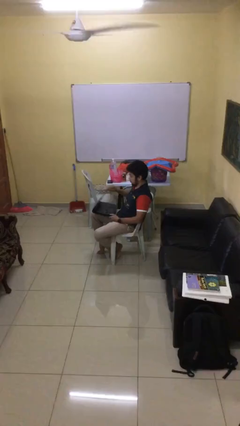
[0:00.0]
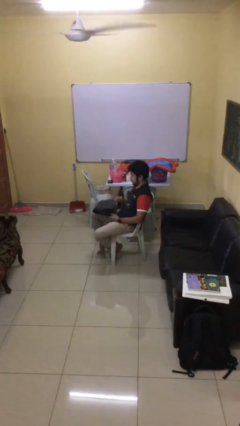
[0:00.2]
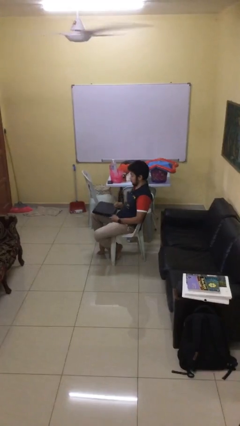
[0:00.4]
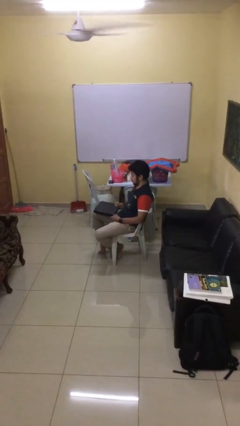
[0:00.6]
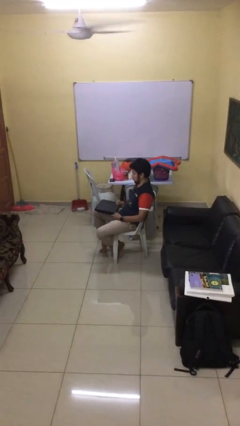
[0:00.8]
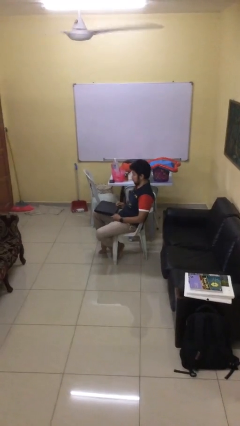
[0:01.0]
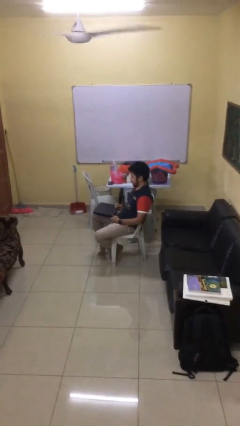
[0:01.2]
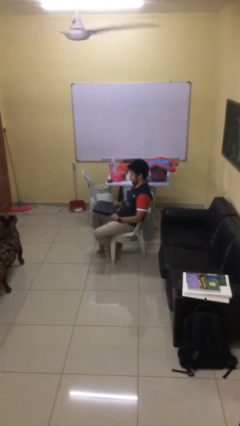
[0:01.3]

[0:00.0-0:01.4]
person closes laptop

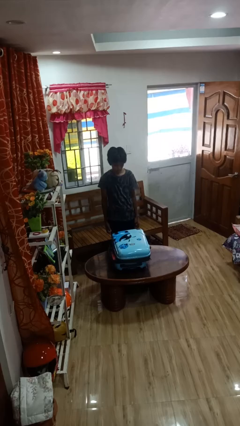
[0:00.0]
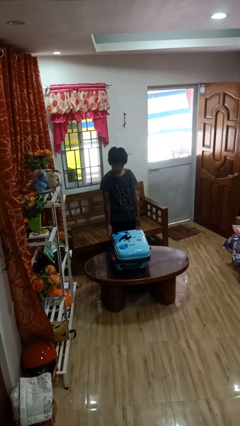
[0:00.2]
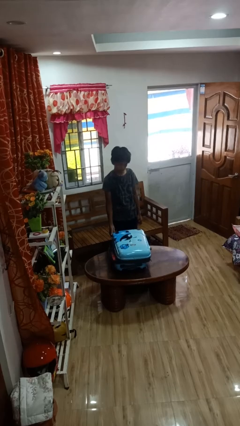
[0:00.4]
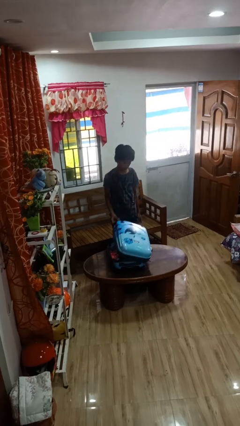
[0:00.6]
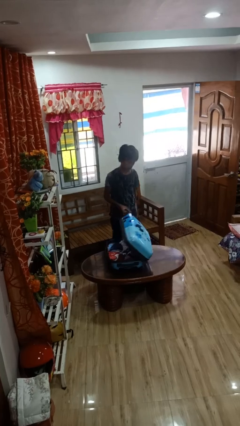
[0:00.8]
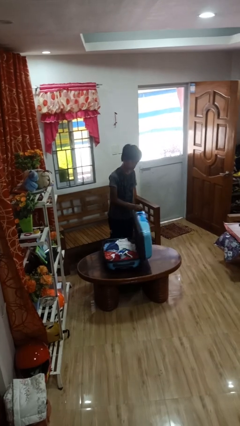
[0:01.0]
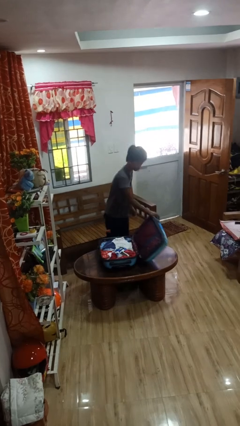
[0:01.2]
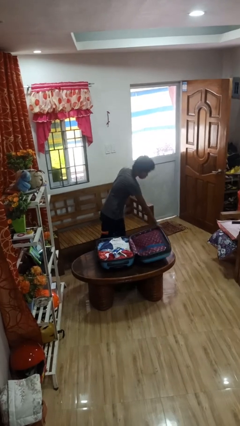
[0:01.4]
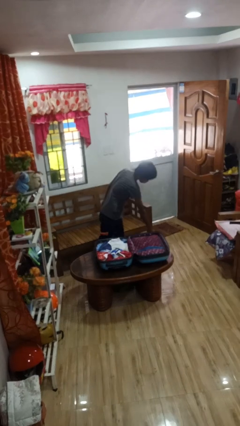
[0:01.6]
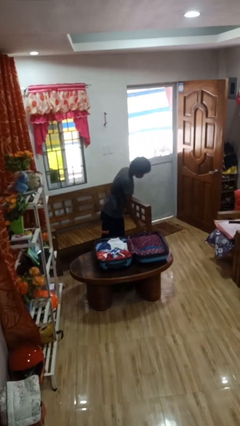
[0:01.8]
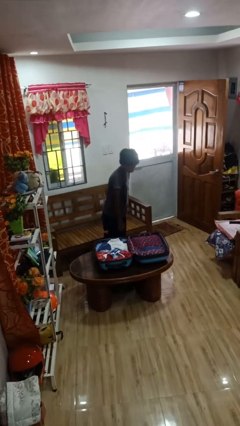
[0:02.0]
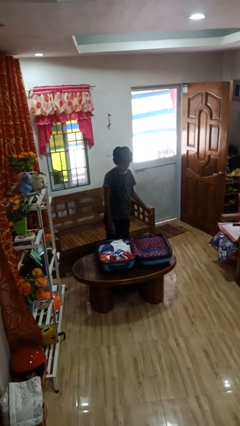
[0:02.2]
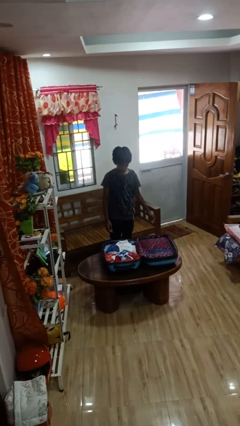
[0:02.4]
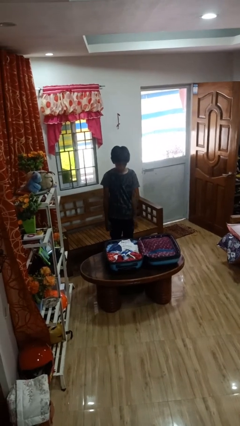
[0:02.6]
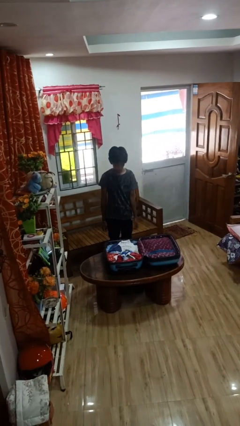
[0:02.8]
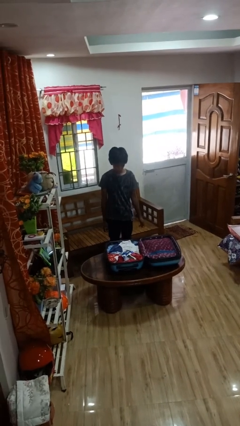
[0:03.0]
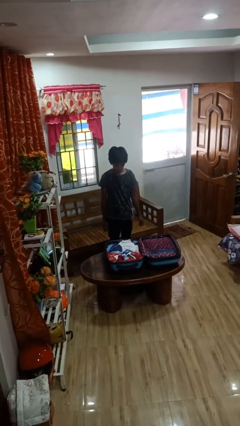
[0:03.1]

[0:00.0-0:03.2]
person opens suitcase

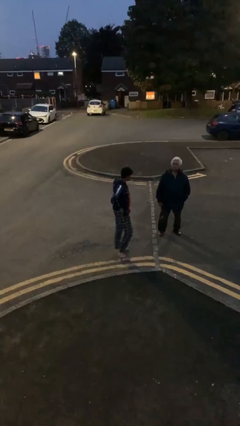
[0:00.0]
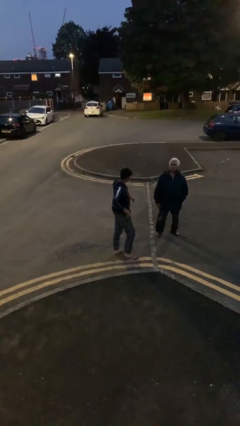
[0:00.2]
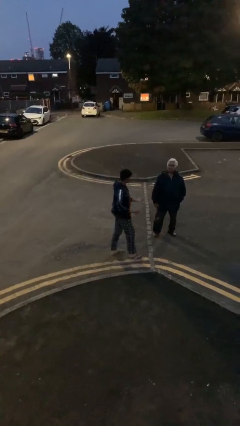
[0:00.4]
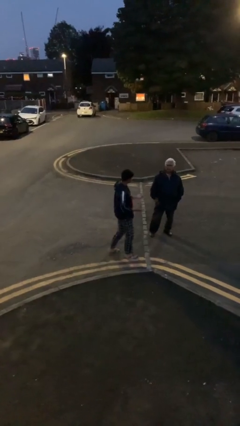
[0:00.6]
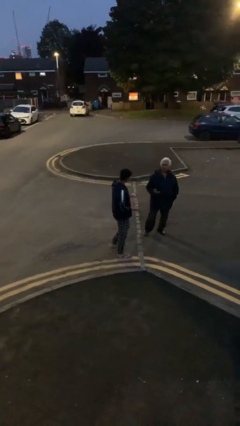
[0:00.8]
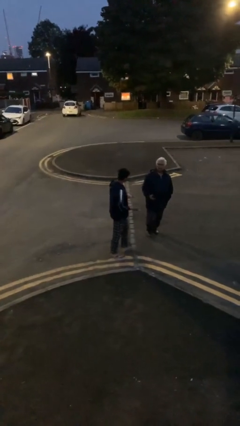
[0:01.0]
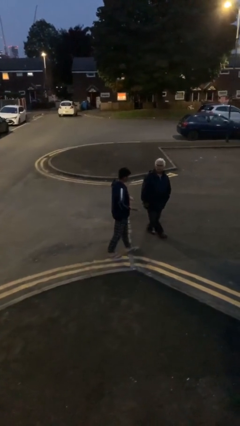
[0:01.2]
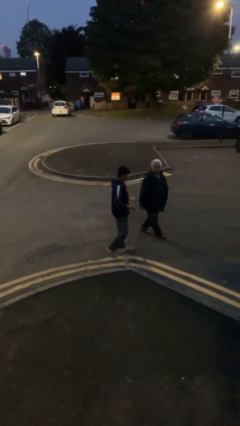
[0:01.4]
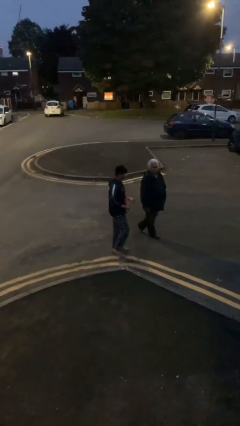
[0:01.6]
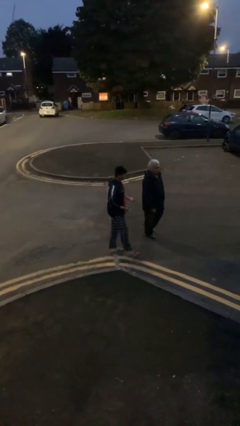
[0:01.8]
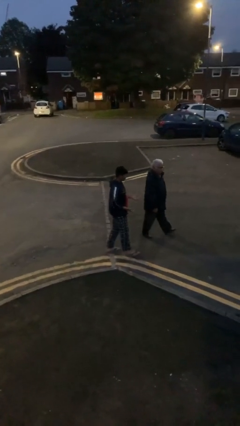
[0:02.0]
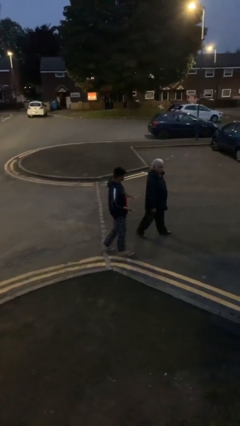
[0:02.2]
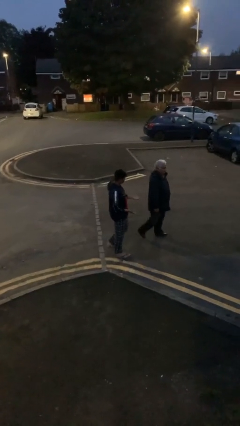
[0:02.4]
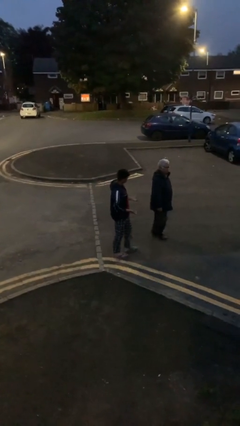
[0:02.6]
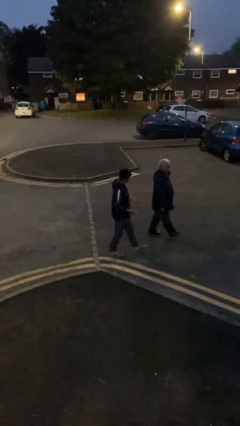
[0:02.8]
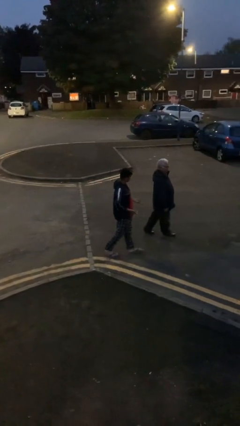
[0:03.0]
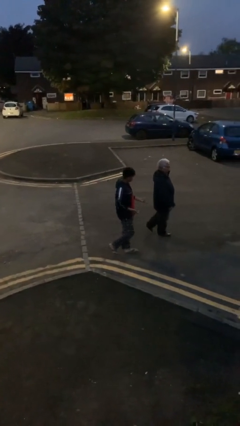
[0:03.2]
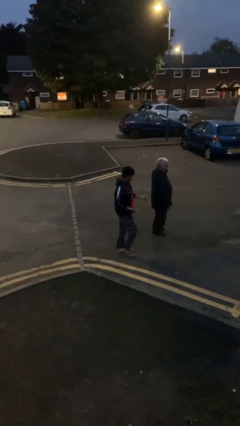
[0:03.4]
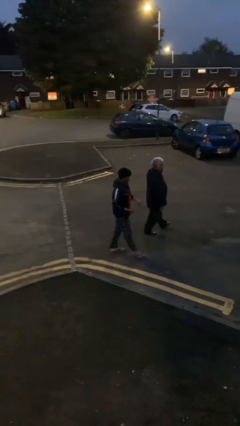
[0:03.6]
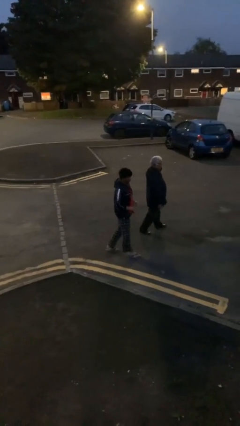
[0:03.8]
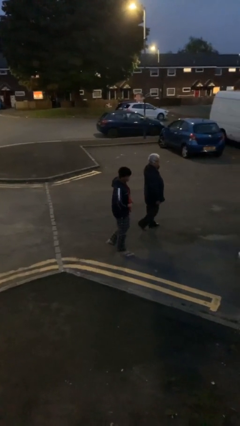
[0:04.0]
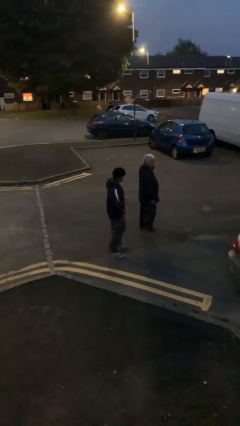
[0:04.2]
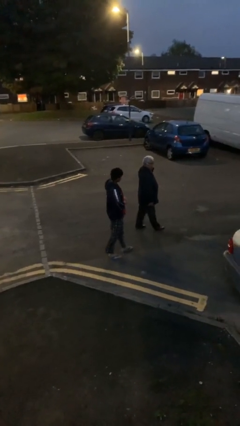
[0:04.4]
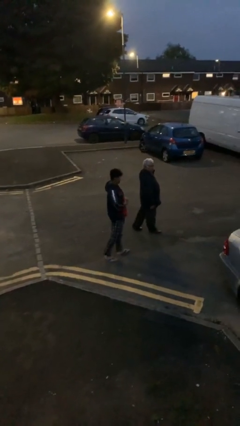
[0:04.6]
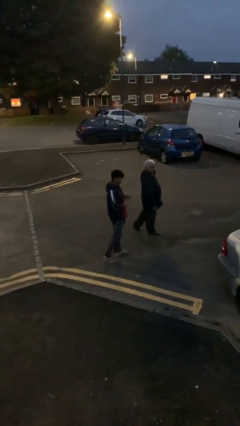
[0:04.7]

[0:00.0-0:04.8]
person talks to person

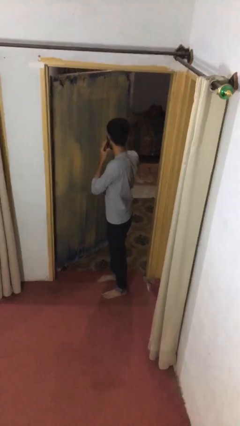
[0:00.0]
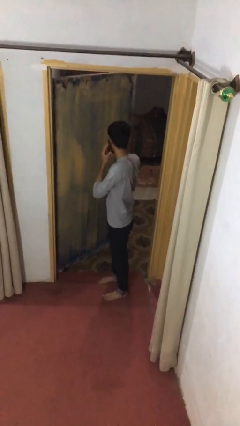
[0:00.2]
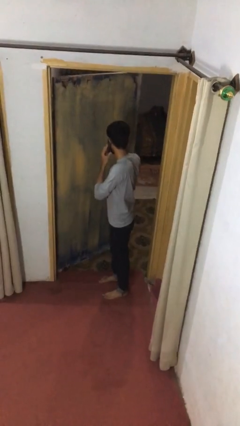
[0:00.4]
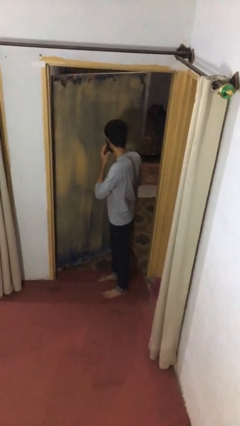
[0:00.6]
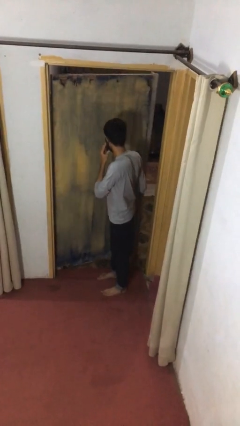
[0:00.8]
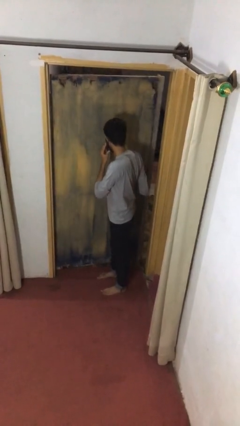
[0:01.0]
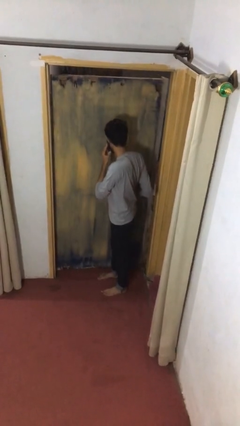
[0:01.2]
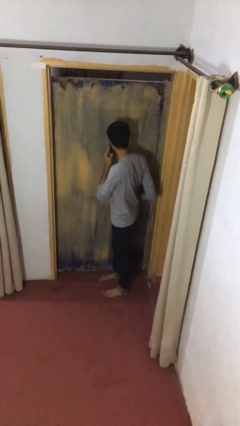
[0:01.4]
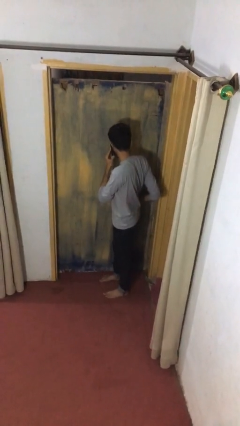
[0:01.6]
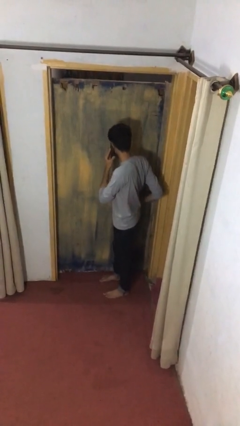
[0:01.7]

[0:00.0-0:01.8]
person closes facility door

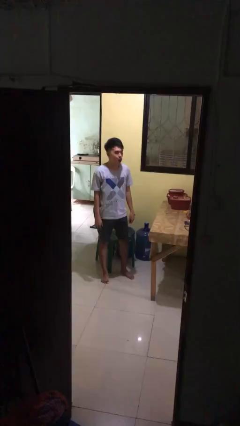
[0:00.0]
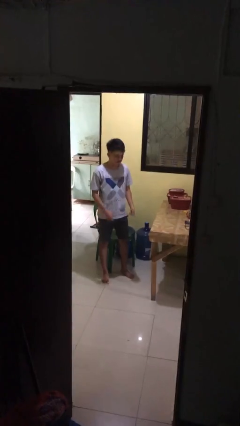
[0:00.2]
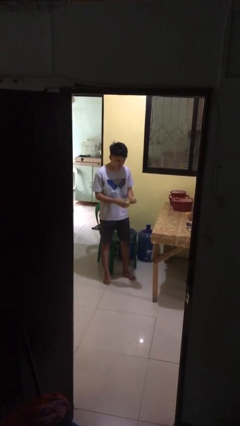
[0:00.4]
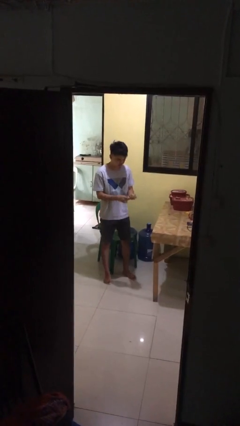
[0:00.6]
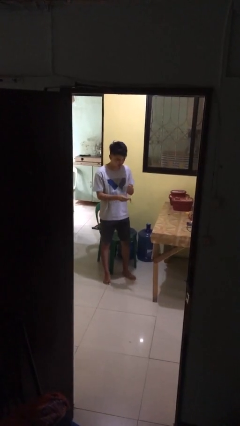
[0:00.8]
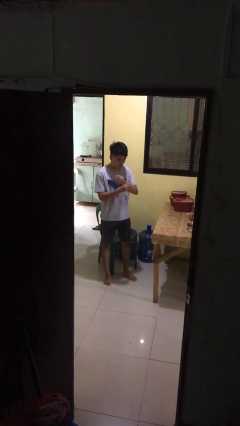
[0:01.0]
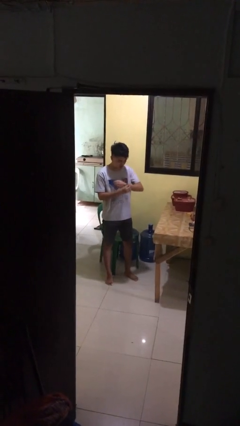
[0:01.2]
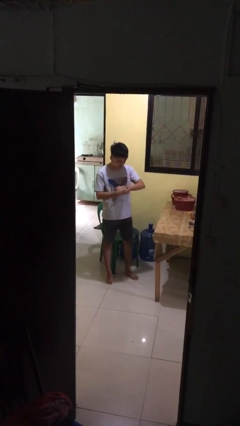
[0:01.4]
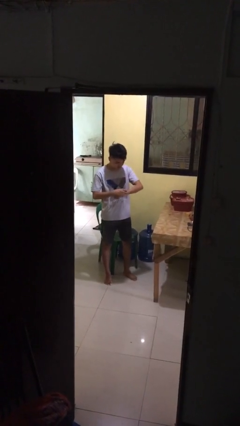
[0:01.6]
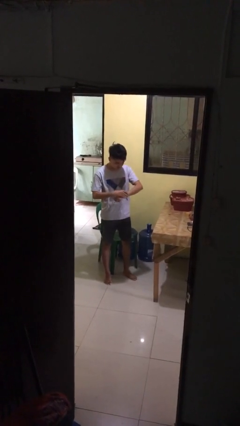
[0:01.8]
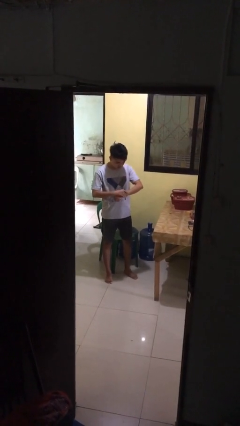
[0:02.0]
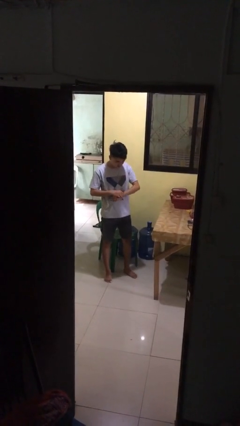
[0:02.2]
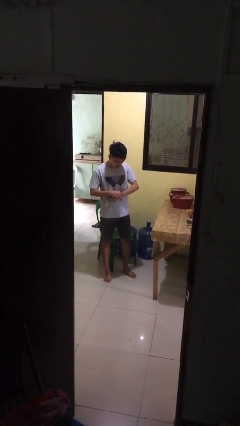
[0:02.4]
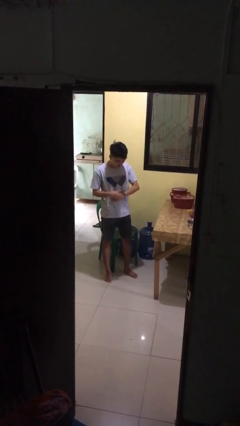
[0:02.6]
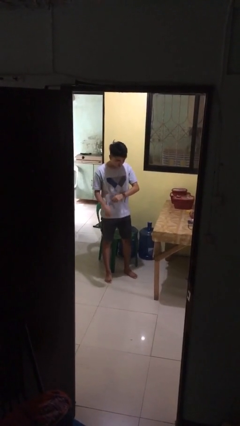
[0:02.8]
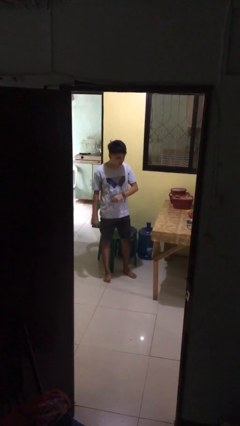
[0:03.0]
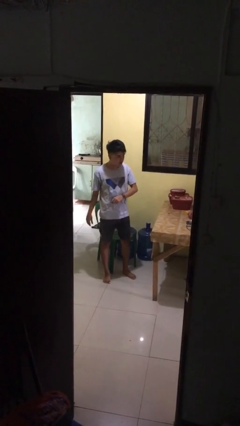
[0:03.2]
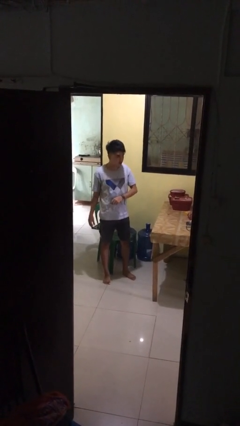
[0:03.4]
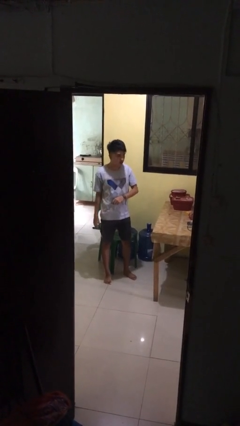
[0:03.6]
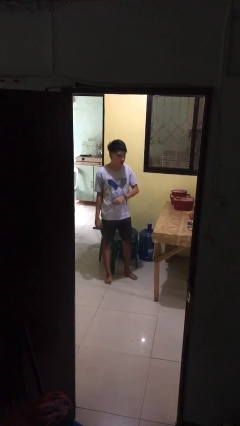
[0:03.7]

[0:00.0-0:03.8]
person puts on wristwatch

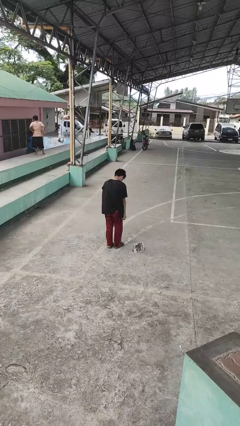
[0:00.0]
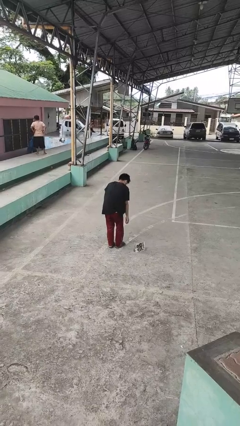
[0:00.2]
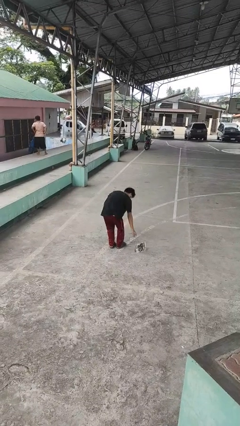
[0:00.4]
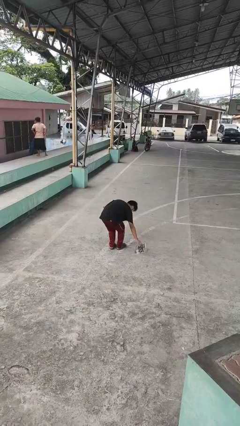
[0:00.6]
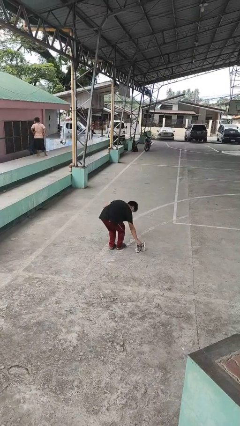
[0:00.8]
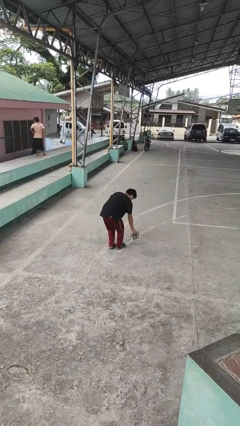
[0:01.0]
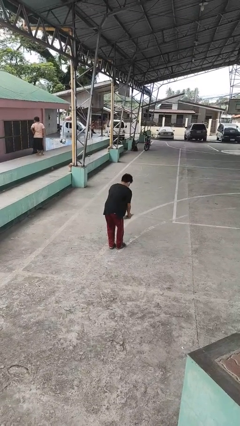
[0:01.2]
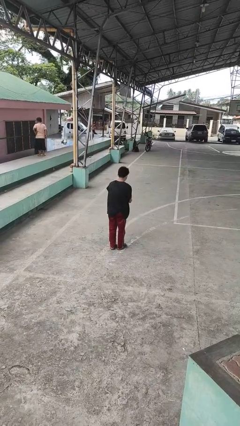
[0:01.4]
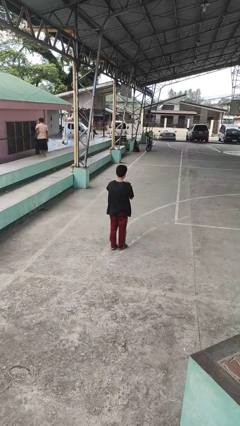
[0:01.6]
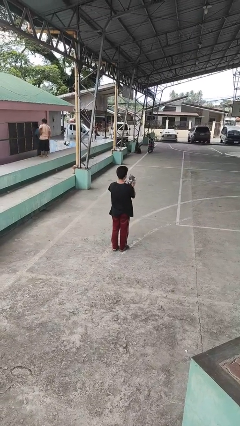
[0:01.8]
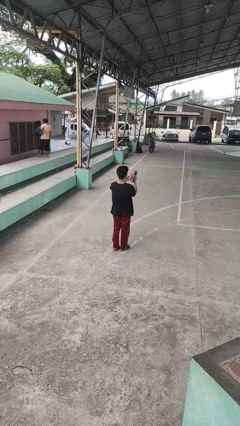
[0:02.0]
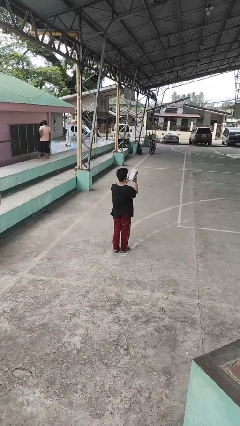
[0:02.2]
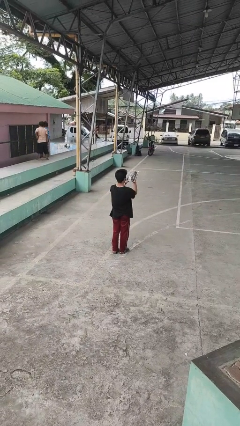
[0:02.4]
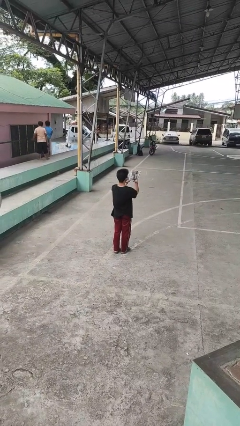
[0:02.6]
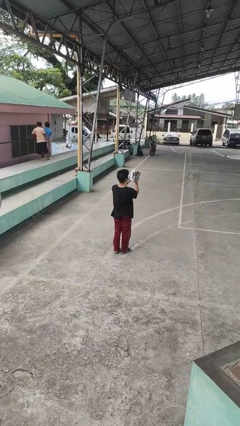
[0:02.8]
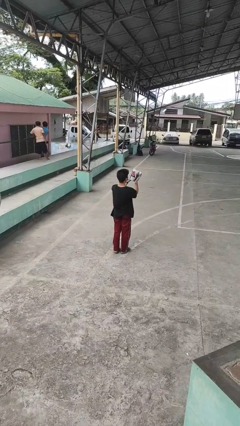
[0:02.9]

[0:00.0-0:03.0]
person picks up object from floor
